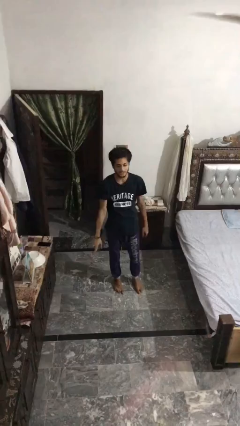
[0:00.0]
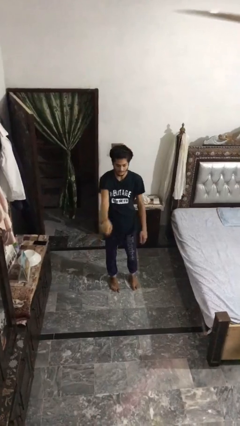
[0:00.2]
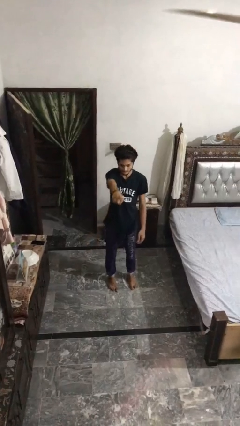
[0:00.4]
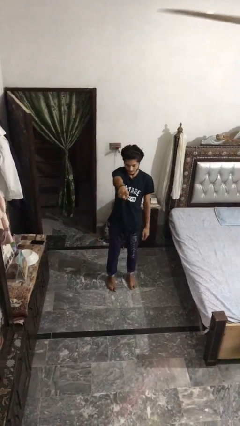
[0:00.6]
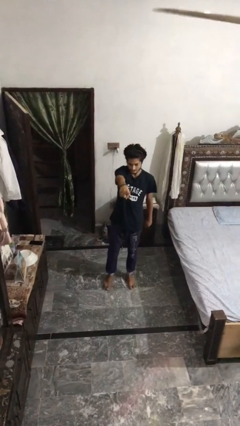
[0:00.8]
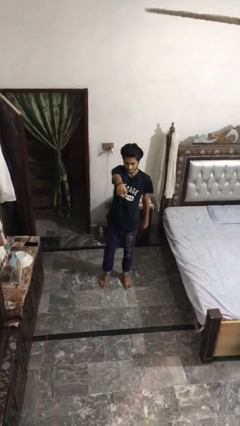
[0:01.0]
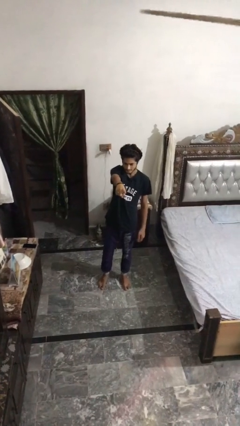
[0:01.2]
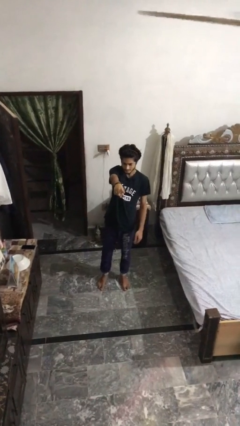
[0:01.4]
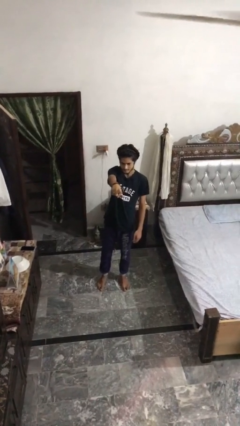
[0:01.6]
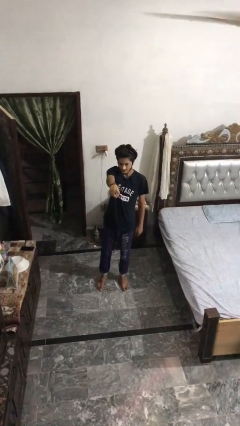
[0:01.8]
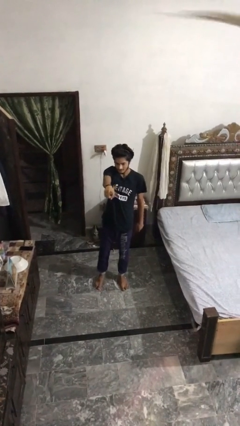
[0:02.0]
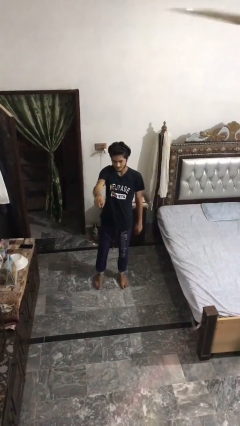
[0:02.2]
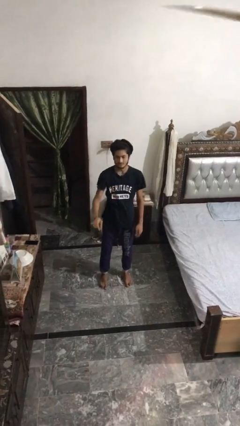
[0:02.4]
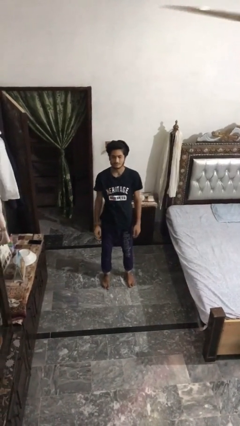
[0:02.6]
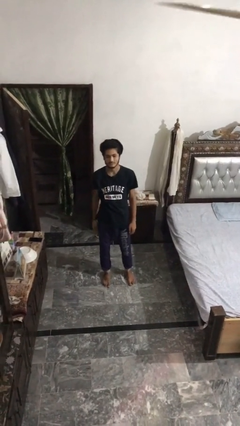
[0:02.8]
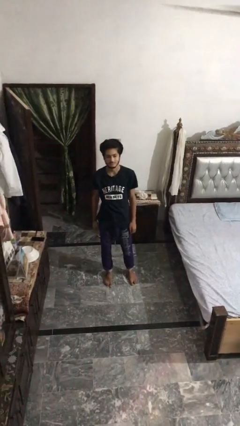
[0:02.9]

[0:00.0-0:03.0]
person points at person

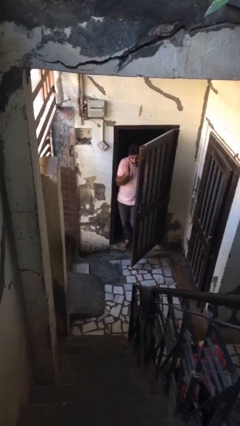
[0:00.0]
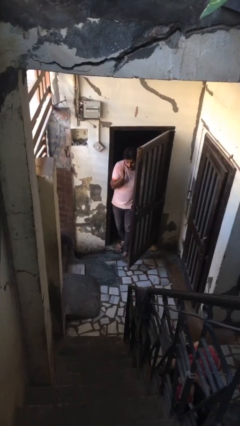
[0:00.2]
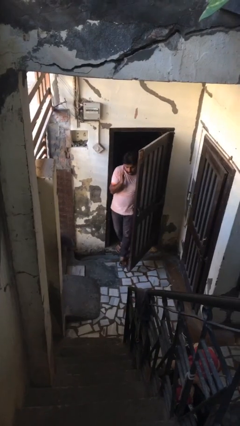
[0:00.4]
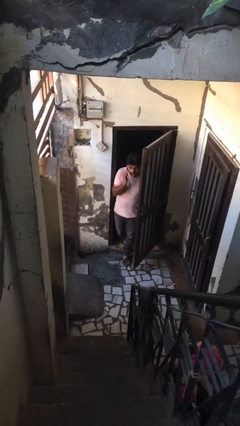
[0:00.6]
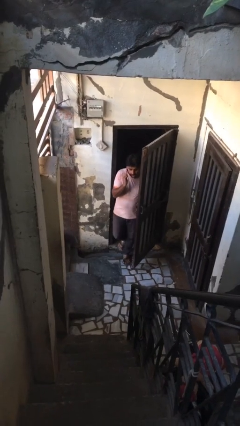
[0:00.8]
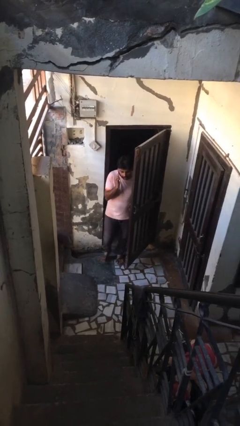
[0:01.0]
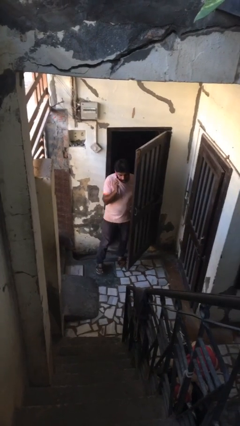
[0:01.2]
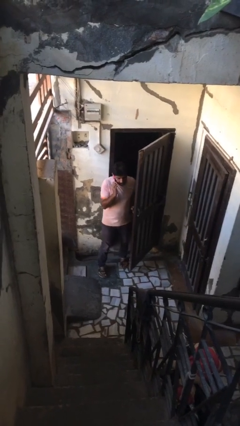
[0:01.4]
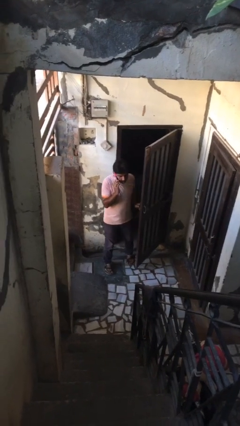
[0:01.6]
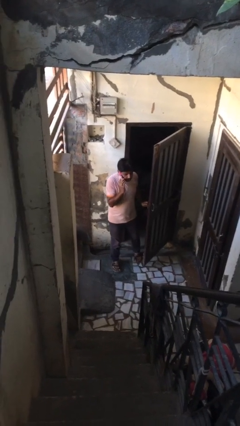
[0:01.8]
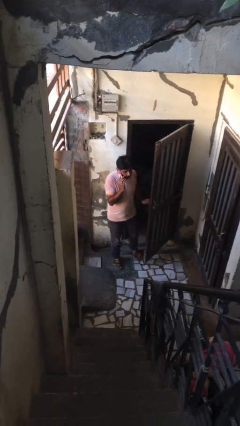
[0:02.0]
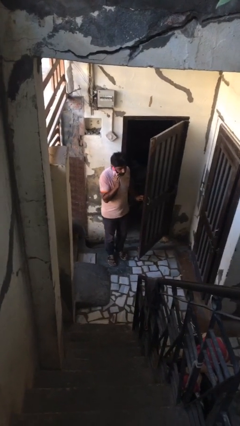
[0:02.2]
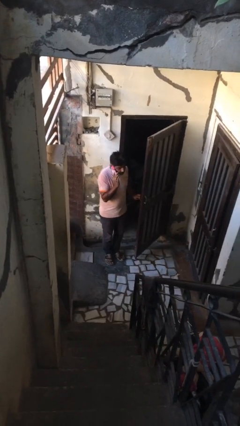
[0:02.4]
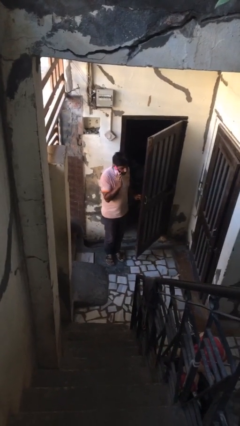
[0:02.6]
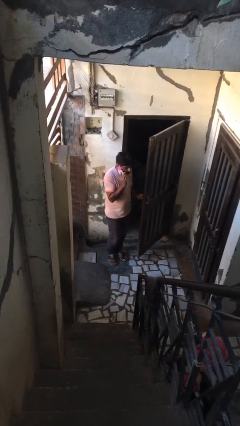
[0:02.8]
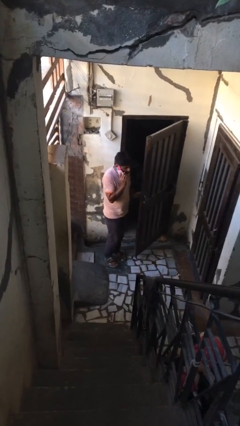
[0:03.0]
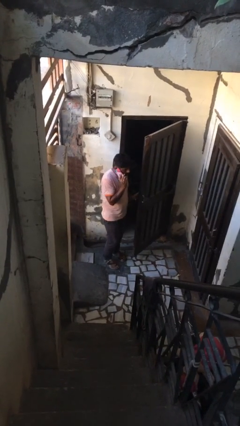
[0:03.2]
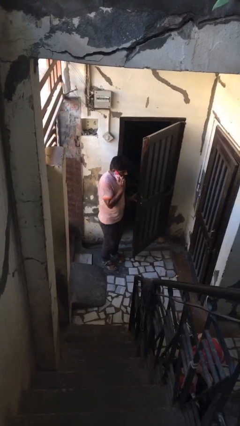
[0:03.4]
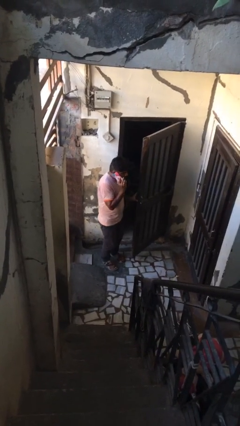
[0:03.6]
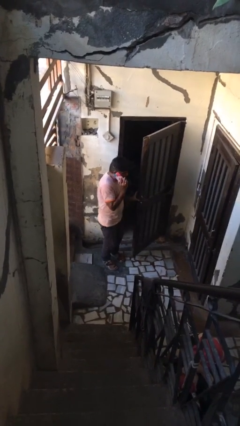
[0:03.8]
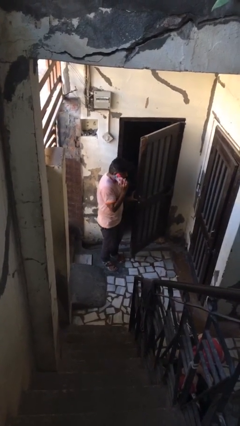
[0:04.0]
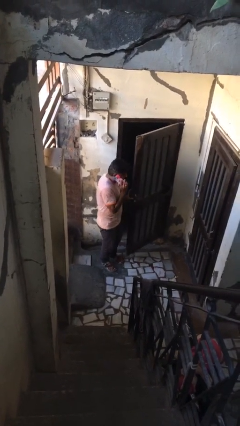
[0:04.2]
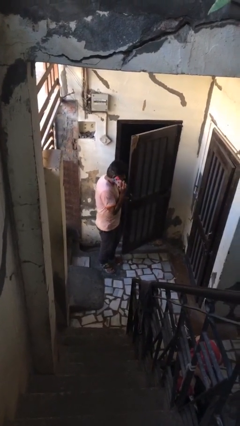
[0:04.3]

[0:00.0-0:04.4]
person enters scene through structure

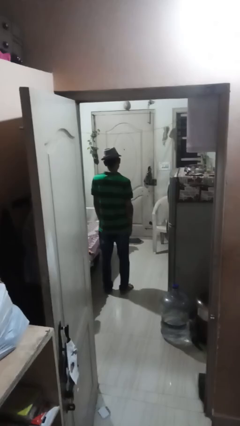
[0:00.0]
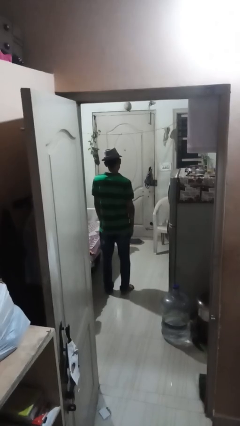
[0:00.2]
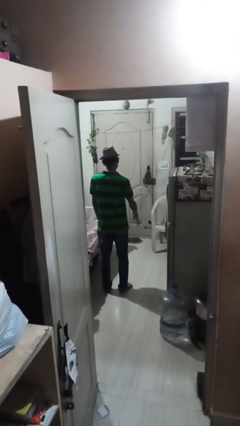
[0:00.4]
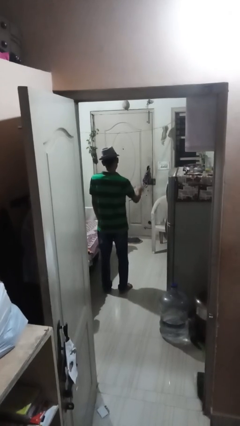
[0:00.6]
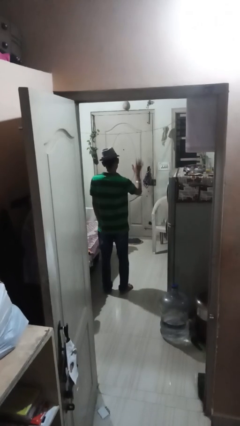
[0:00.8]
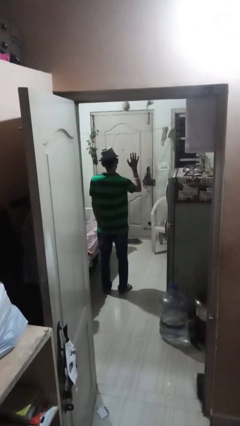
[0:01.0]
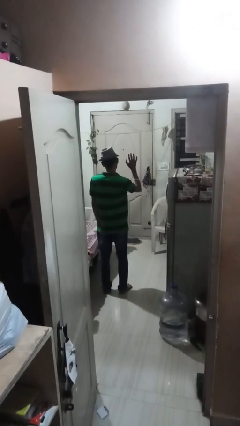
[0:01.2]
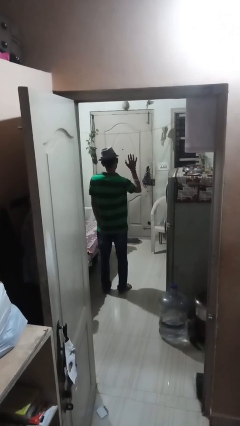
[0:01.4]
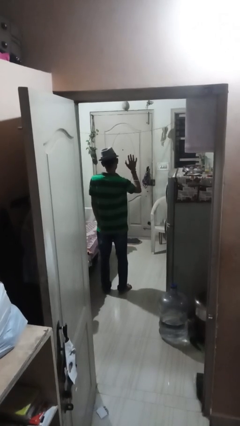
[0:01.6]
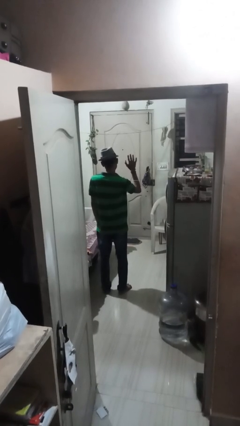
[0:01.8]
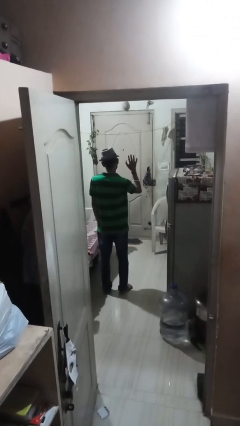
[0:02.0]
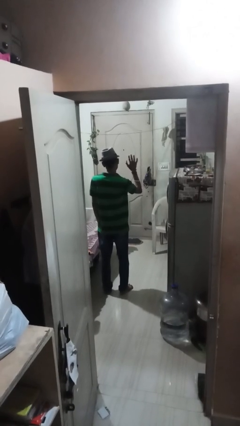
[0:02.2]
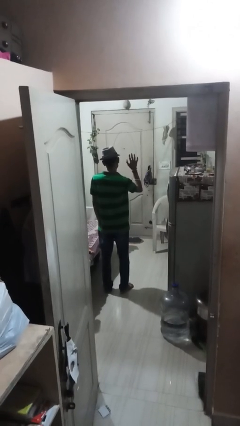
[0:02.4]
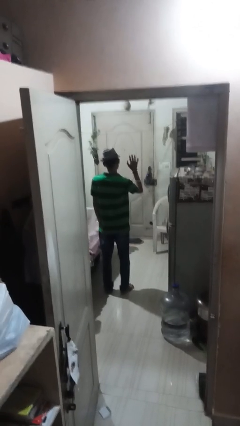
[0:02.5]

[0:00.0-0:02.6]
person gestures number five

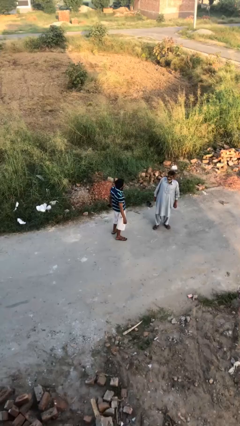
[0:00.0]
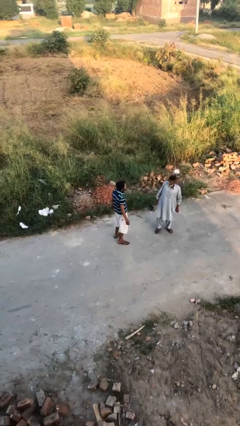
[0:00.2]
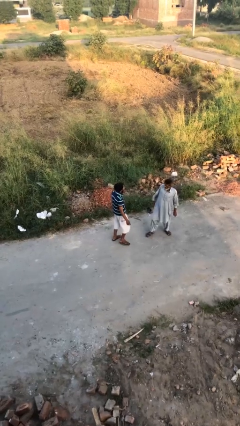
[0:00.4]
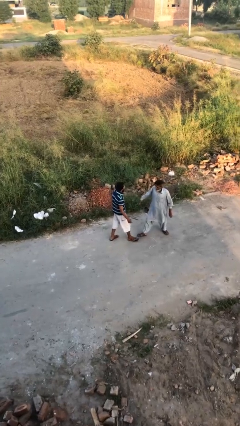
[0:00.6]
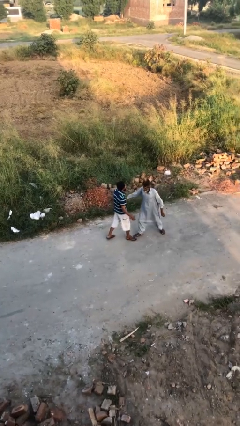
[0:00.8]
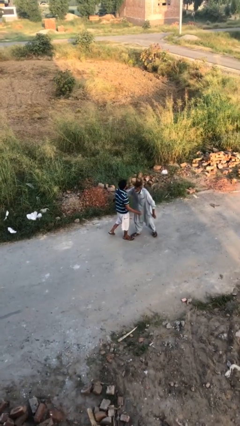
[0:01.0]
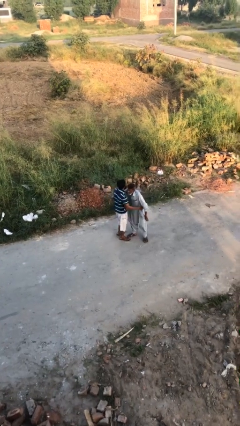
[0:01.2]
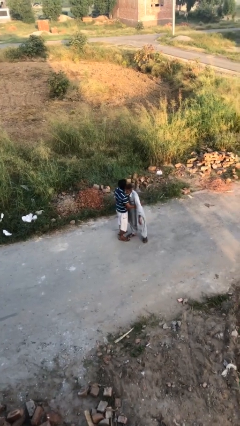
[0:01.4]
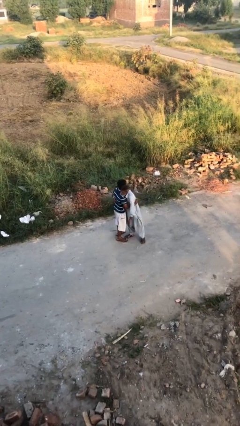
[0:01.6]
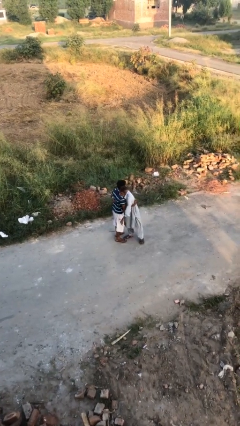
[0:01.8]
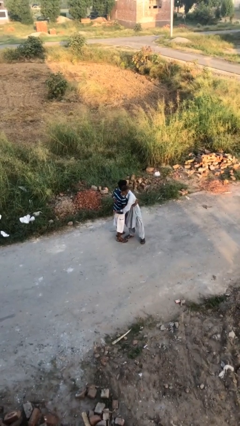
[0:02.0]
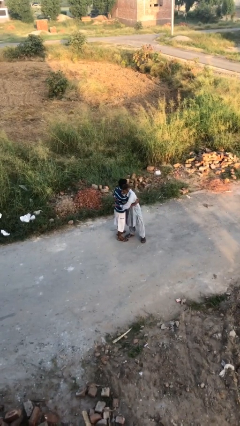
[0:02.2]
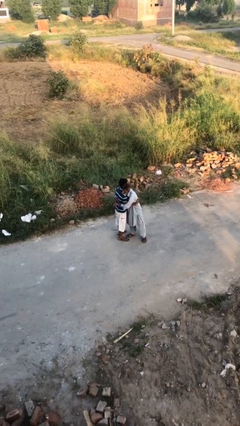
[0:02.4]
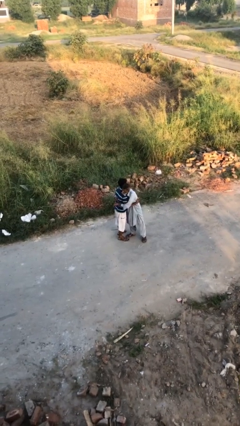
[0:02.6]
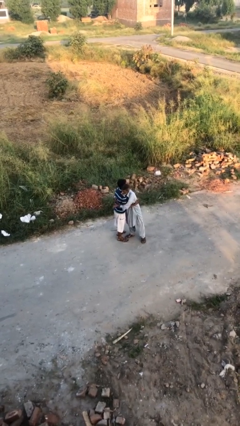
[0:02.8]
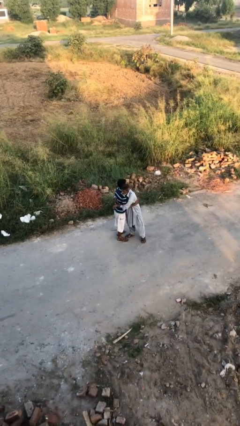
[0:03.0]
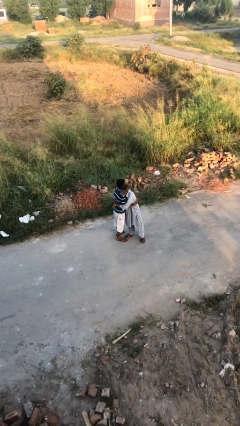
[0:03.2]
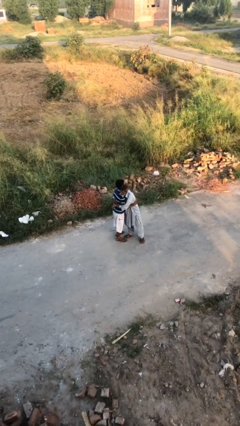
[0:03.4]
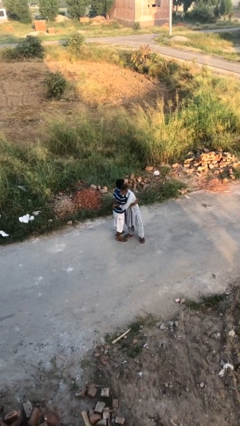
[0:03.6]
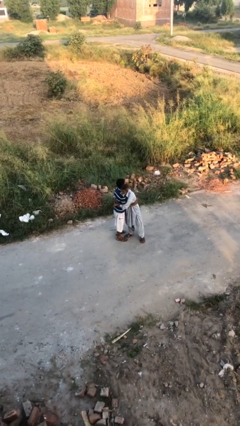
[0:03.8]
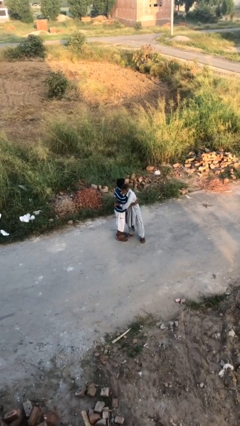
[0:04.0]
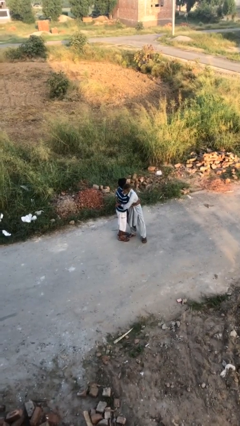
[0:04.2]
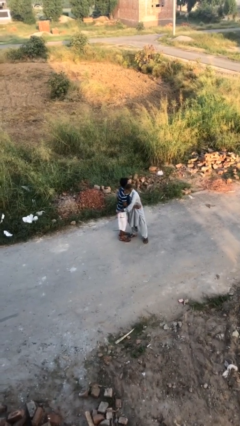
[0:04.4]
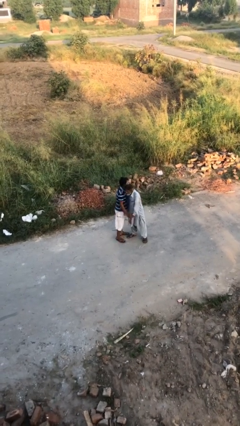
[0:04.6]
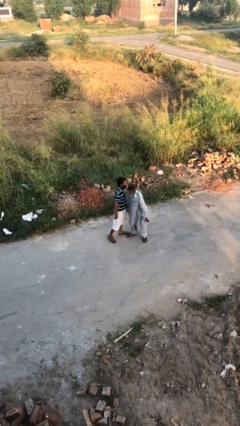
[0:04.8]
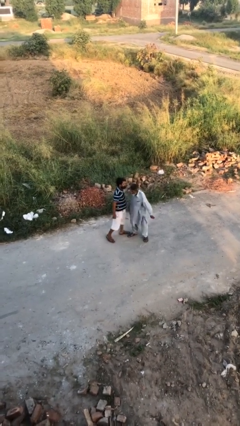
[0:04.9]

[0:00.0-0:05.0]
person embraces person

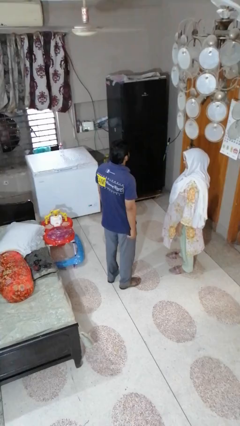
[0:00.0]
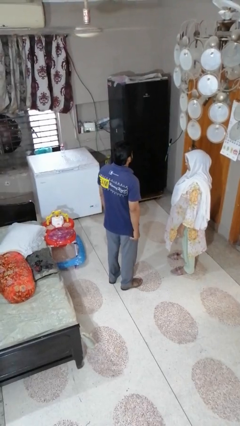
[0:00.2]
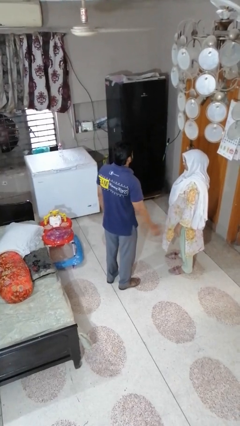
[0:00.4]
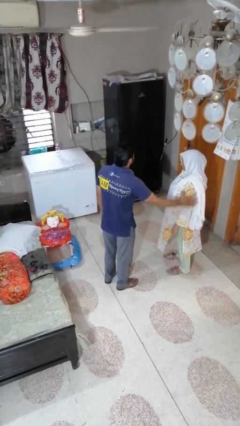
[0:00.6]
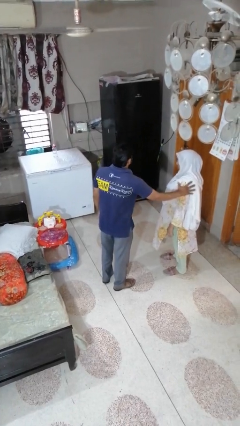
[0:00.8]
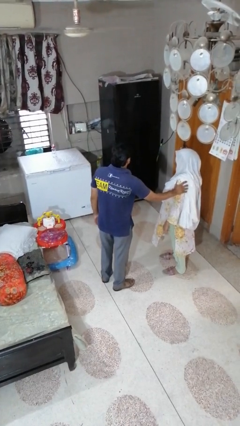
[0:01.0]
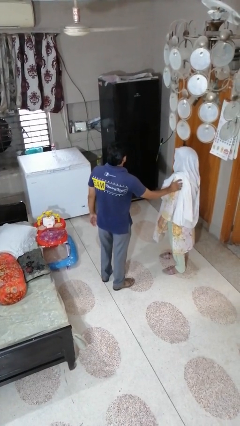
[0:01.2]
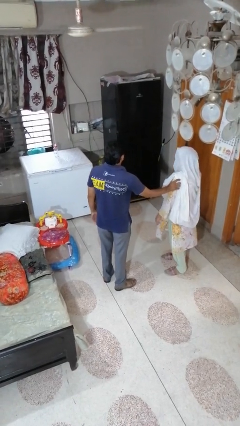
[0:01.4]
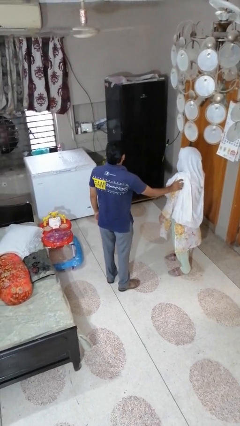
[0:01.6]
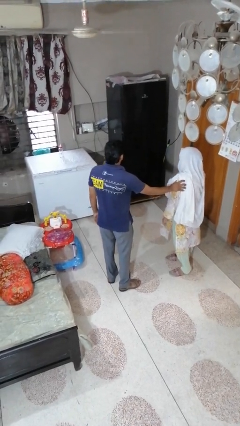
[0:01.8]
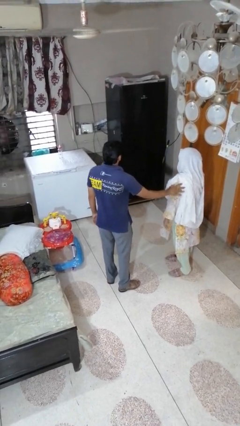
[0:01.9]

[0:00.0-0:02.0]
person grabs person by bicep

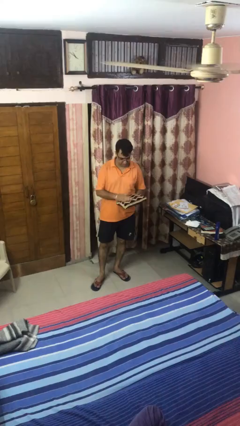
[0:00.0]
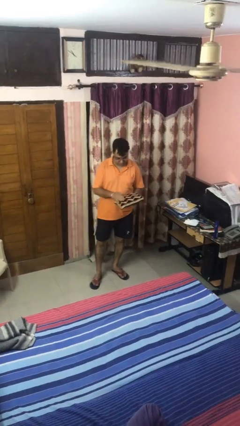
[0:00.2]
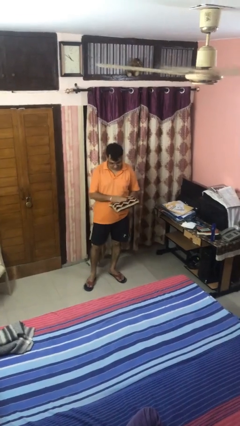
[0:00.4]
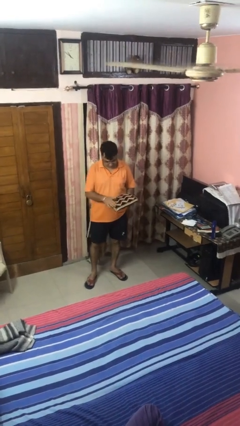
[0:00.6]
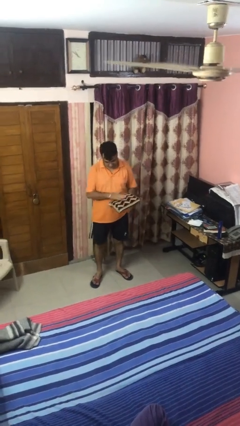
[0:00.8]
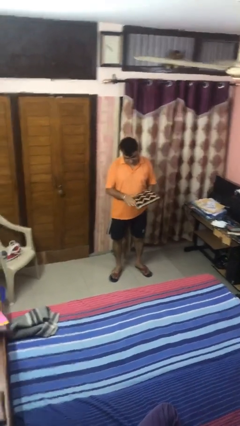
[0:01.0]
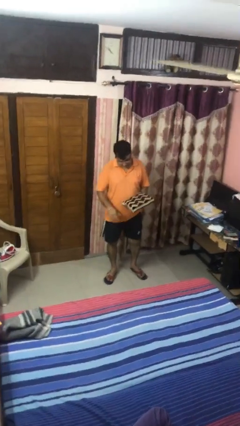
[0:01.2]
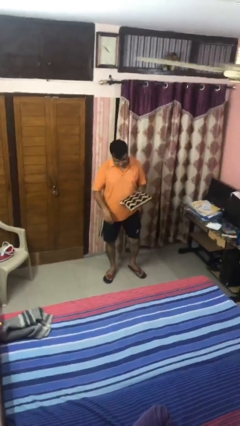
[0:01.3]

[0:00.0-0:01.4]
person waves hand over object
